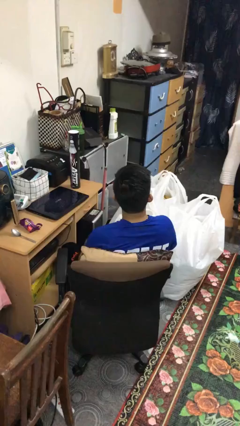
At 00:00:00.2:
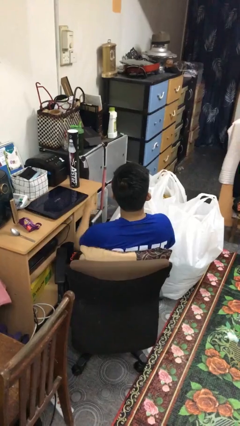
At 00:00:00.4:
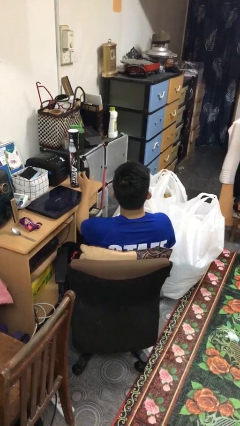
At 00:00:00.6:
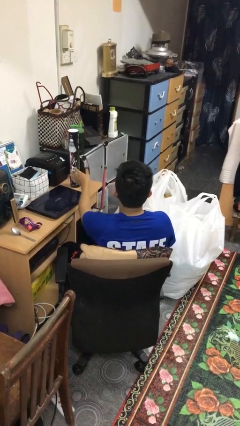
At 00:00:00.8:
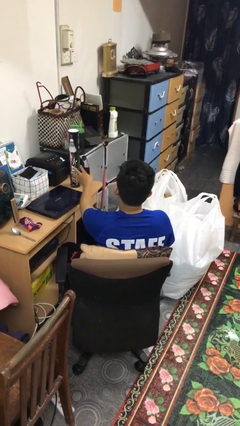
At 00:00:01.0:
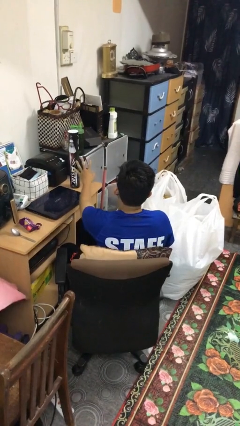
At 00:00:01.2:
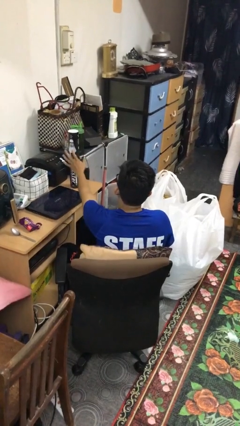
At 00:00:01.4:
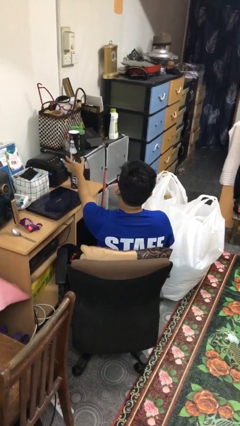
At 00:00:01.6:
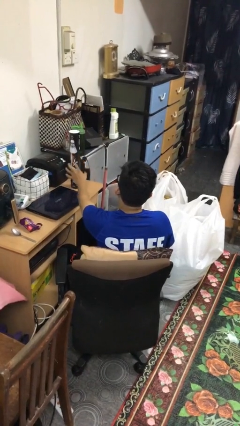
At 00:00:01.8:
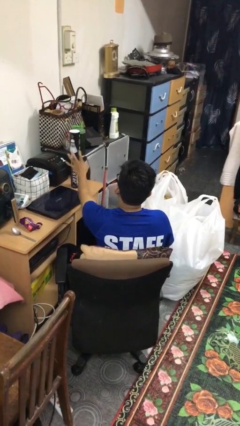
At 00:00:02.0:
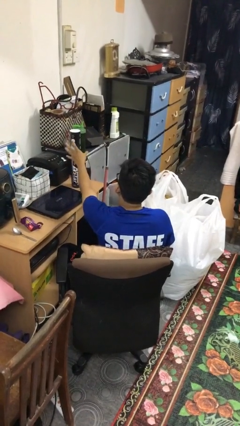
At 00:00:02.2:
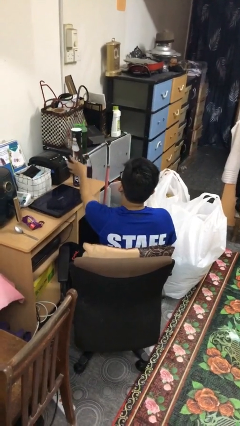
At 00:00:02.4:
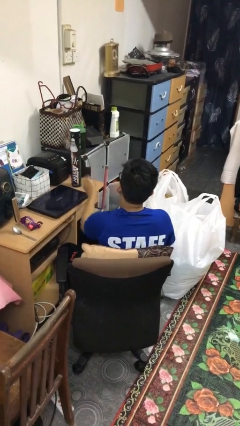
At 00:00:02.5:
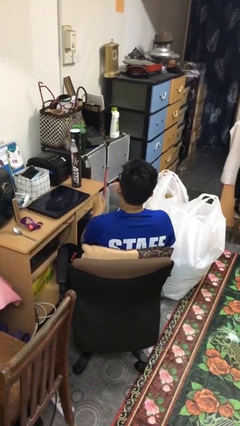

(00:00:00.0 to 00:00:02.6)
person waves hand over object

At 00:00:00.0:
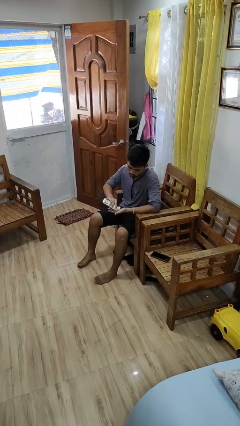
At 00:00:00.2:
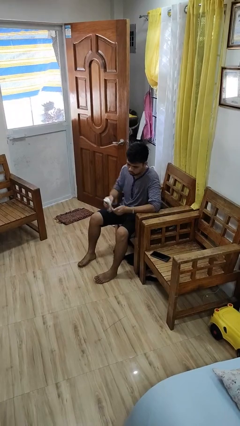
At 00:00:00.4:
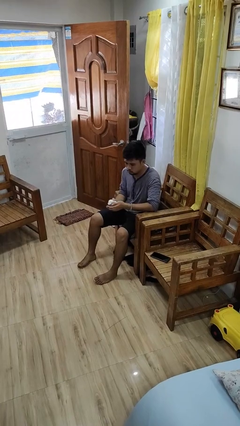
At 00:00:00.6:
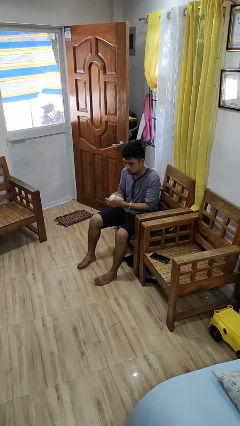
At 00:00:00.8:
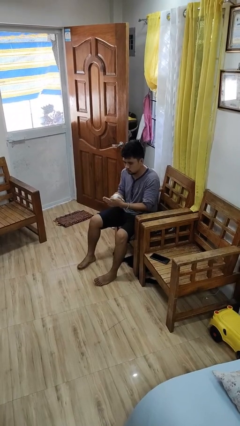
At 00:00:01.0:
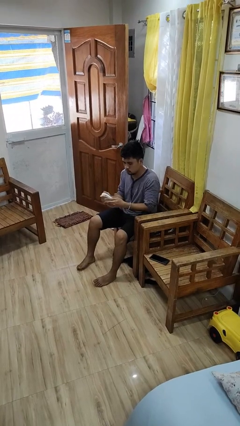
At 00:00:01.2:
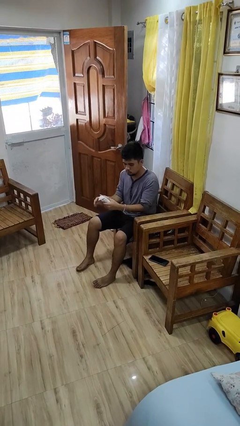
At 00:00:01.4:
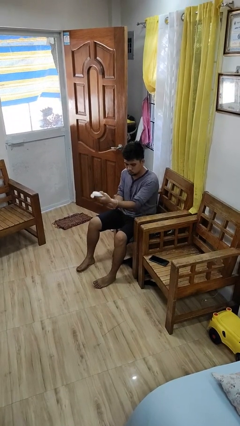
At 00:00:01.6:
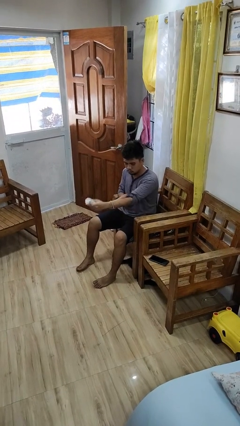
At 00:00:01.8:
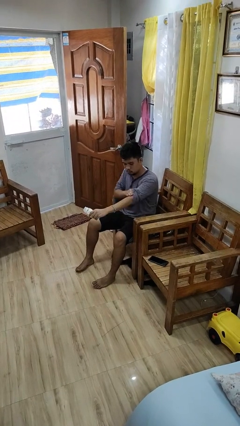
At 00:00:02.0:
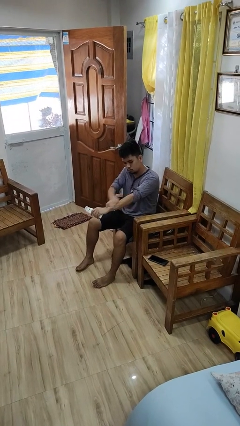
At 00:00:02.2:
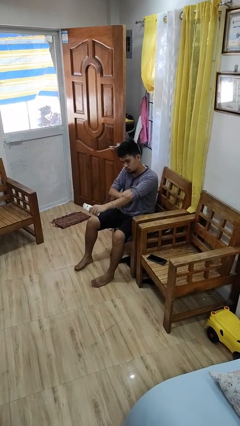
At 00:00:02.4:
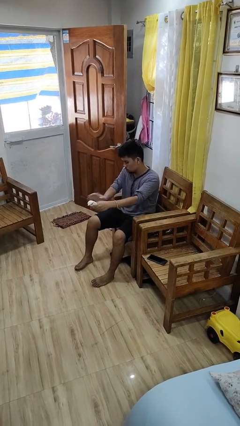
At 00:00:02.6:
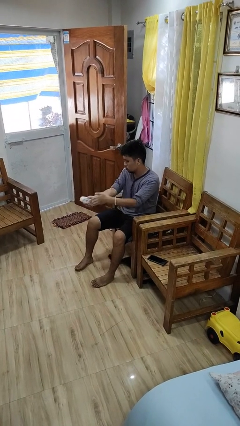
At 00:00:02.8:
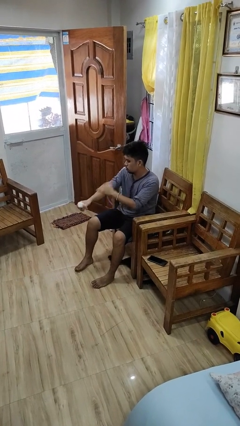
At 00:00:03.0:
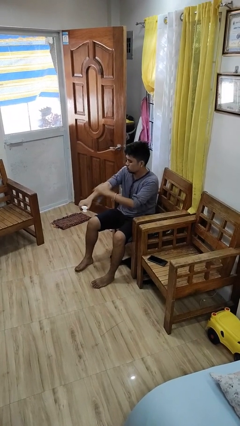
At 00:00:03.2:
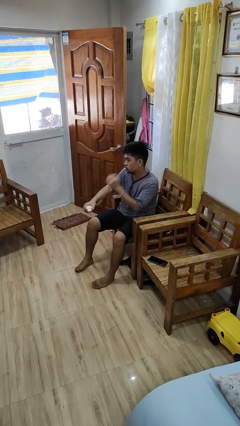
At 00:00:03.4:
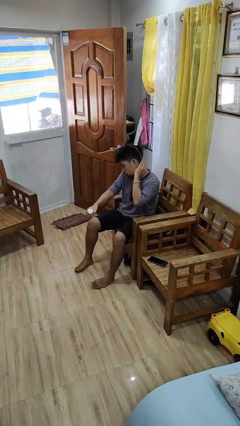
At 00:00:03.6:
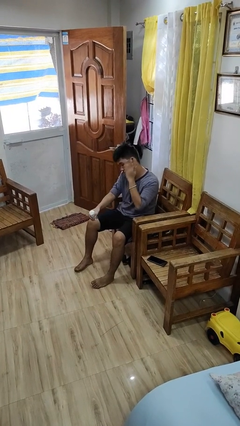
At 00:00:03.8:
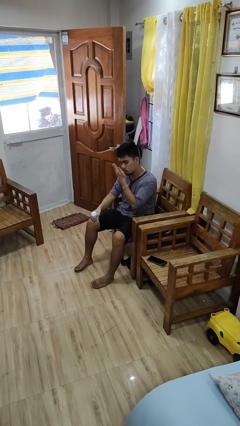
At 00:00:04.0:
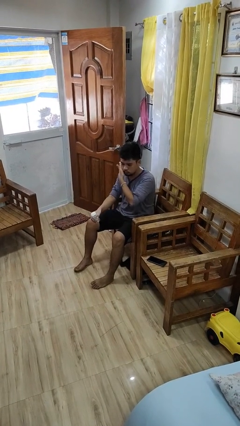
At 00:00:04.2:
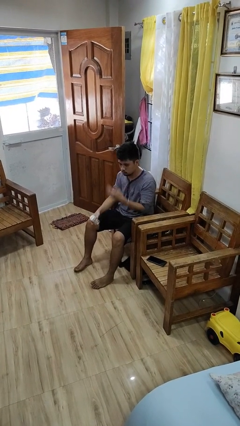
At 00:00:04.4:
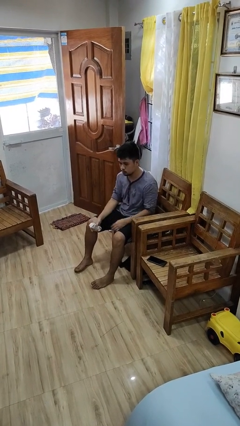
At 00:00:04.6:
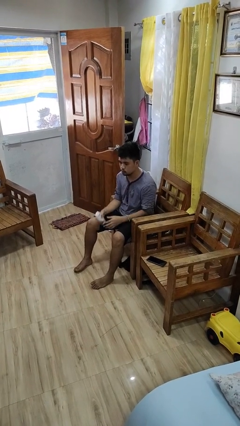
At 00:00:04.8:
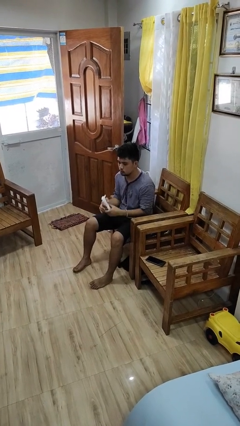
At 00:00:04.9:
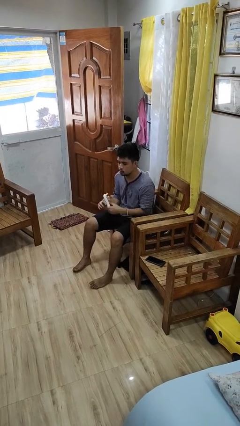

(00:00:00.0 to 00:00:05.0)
person applies sunscreen

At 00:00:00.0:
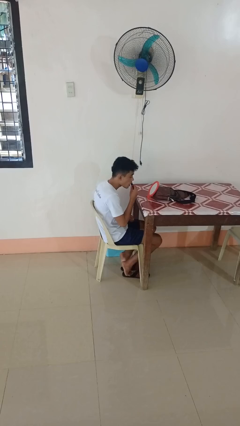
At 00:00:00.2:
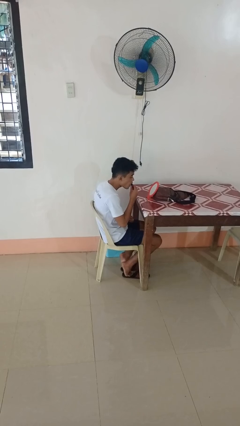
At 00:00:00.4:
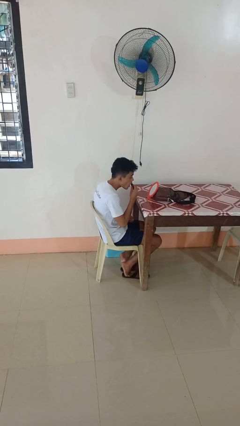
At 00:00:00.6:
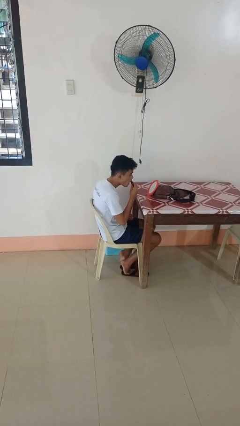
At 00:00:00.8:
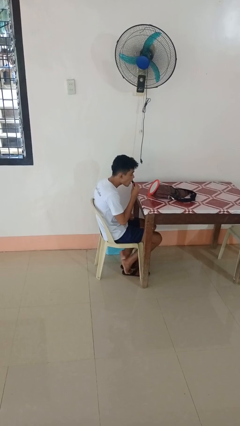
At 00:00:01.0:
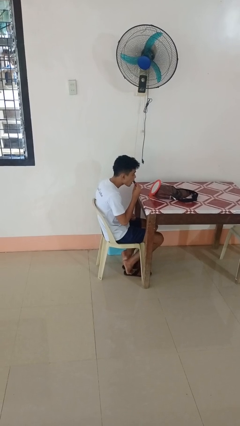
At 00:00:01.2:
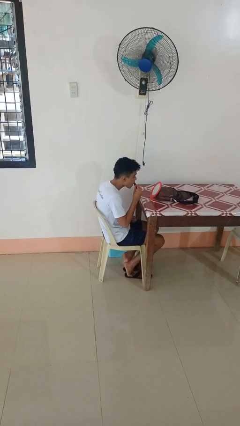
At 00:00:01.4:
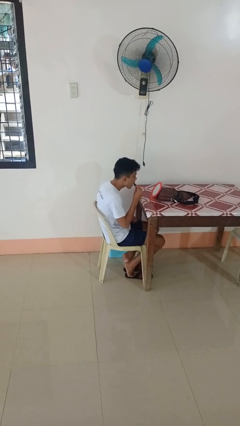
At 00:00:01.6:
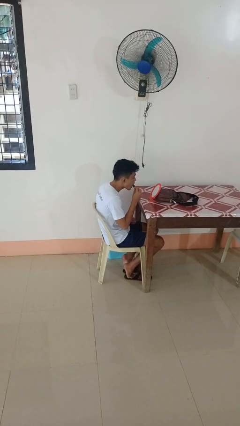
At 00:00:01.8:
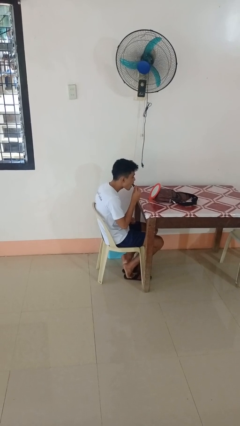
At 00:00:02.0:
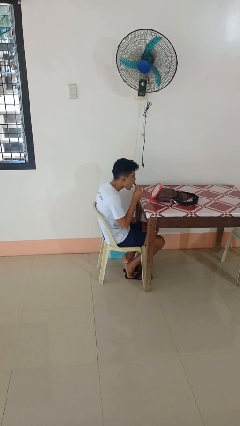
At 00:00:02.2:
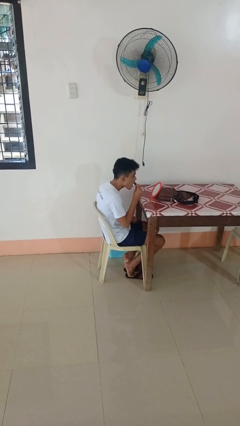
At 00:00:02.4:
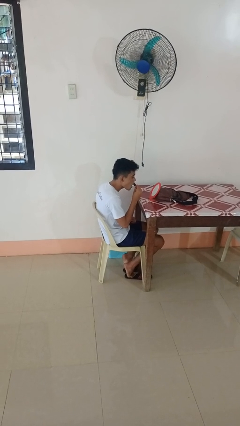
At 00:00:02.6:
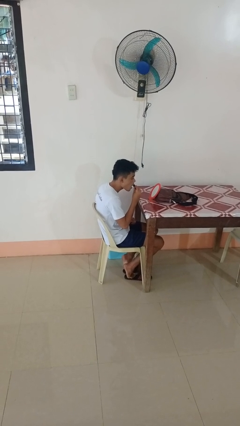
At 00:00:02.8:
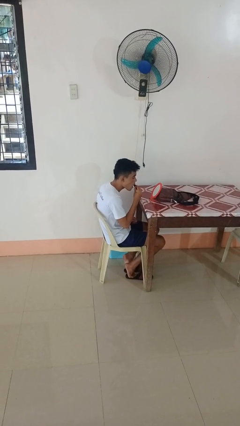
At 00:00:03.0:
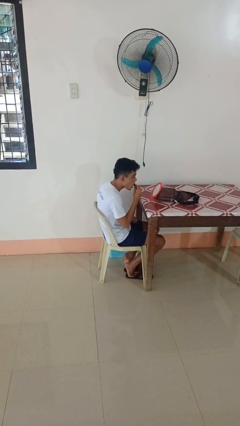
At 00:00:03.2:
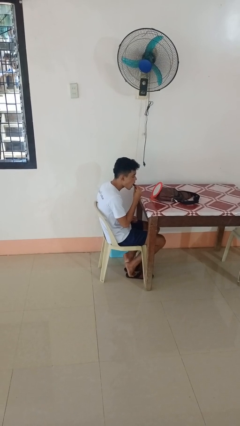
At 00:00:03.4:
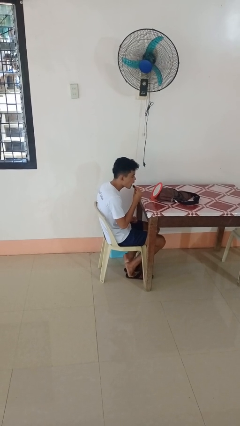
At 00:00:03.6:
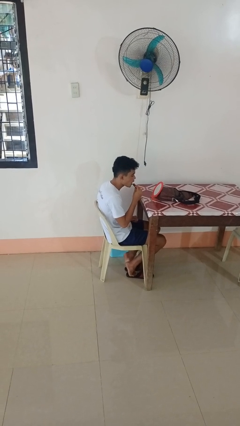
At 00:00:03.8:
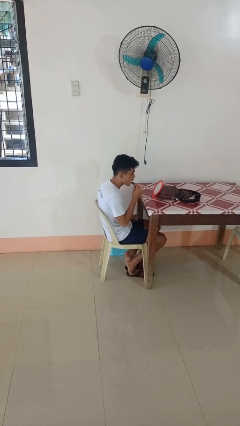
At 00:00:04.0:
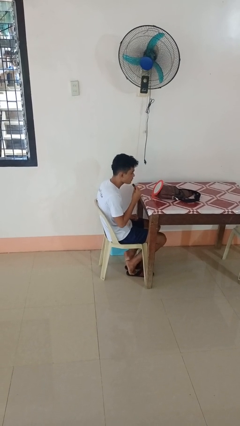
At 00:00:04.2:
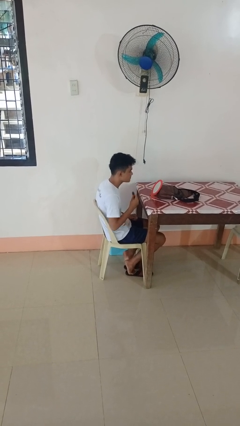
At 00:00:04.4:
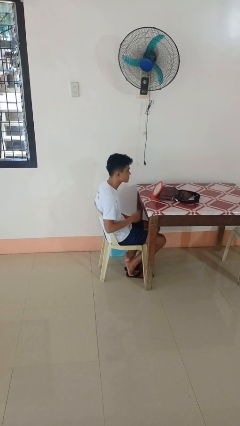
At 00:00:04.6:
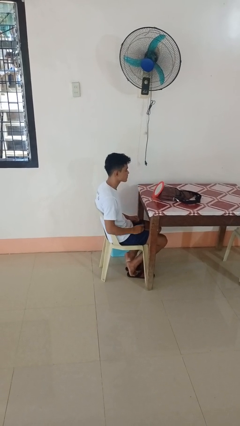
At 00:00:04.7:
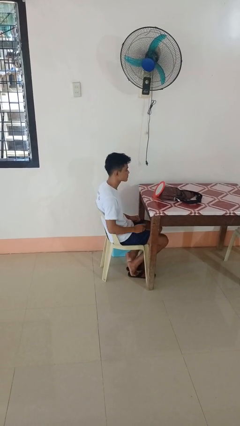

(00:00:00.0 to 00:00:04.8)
person applies lip makeup

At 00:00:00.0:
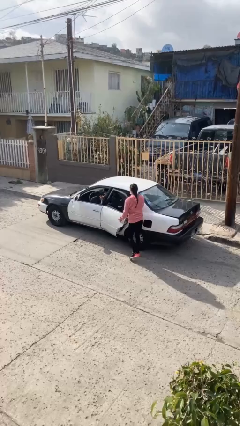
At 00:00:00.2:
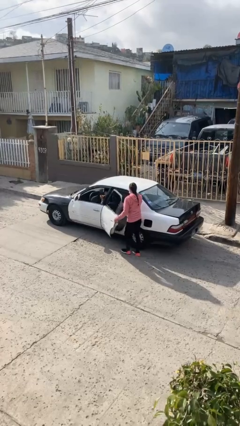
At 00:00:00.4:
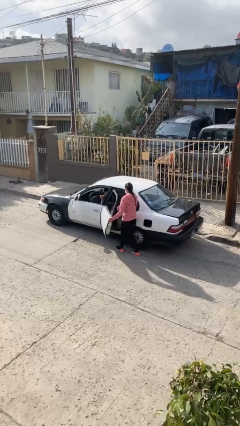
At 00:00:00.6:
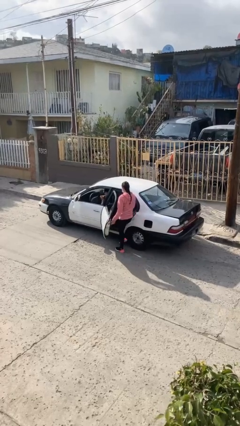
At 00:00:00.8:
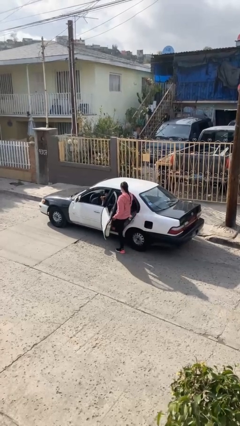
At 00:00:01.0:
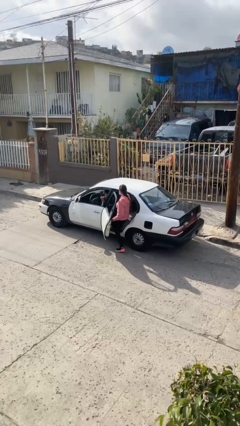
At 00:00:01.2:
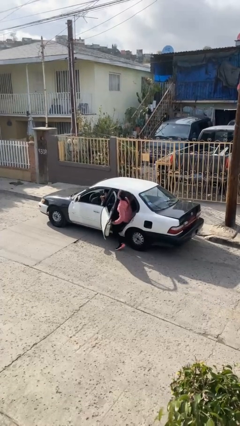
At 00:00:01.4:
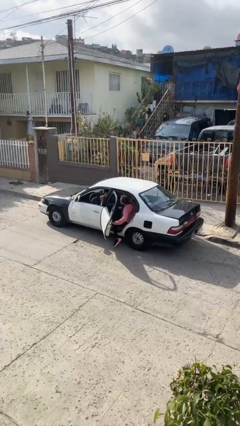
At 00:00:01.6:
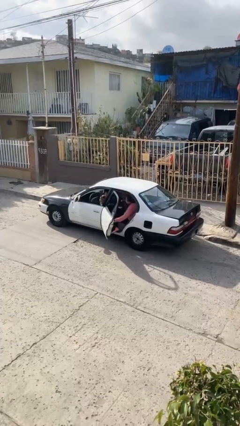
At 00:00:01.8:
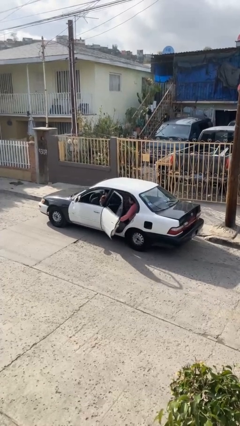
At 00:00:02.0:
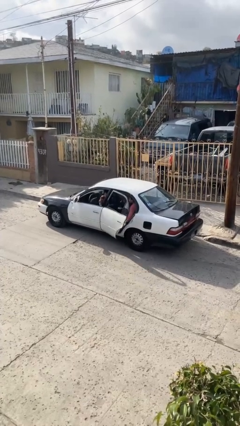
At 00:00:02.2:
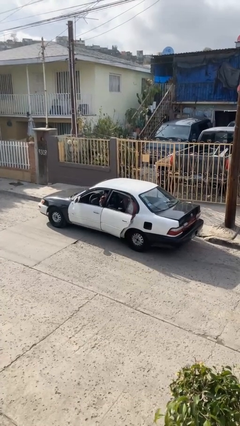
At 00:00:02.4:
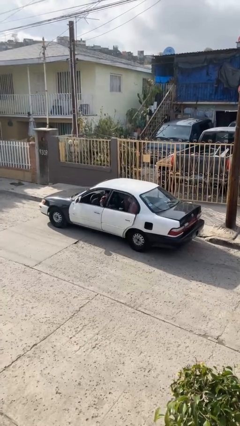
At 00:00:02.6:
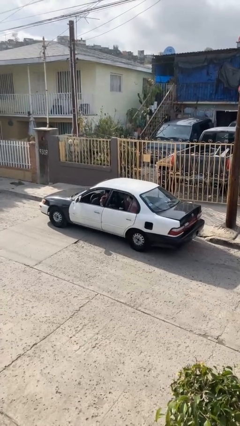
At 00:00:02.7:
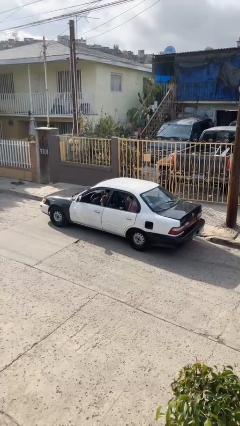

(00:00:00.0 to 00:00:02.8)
car picks up person

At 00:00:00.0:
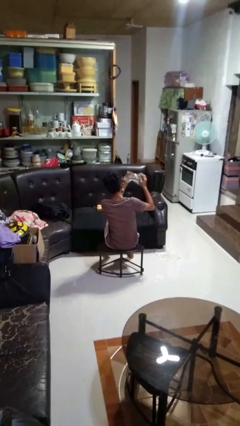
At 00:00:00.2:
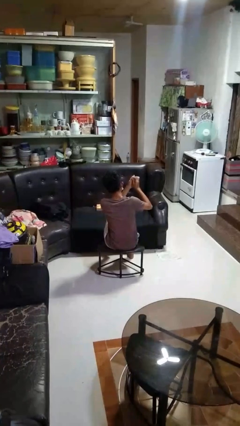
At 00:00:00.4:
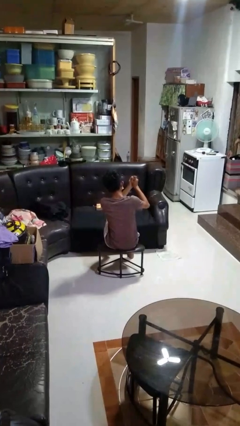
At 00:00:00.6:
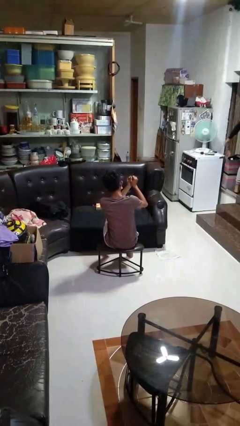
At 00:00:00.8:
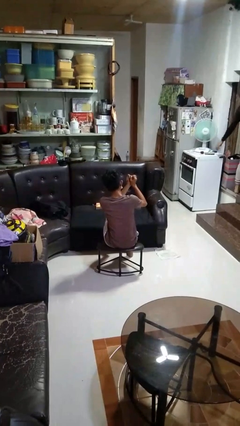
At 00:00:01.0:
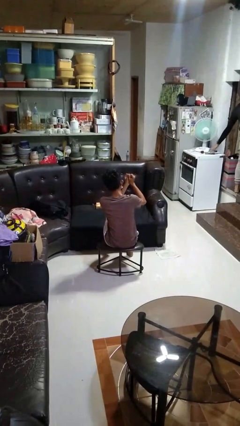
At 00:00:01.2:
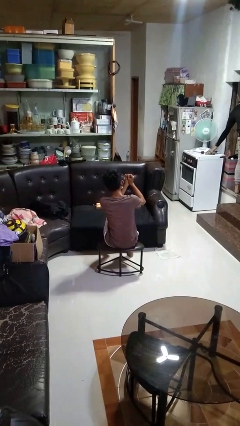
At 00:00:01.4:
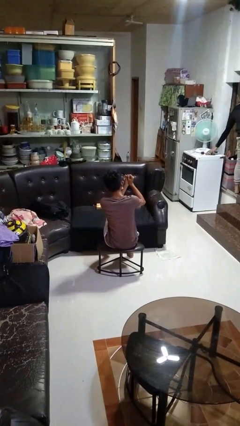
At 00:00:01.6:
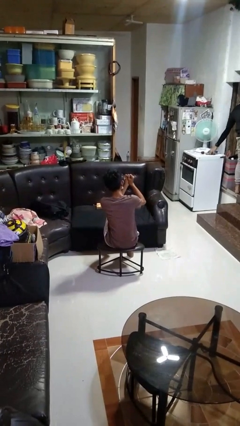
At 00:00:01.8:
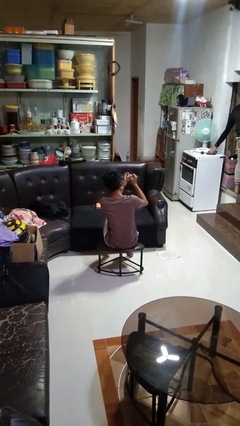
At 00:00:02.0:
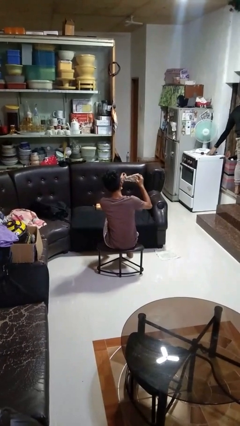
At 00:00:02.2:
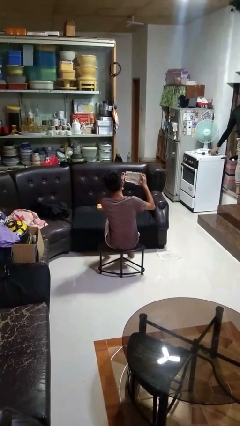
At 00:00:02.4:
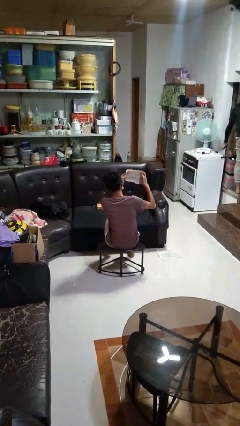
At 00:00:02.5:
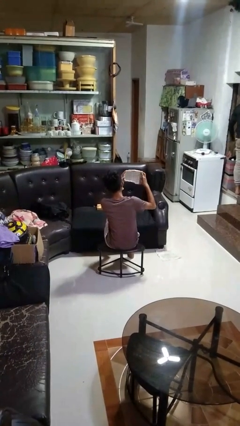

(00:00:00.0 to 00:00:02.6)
person crumples paper
